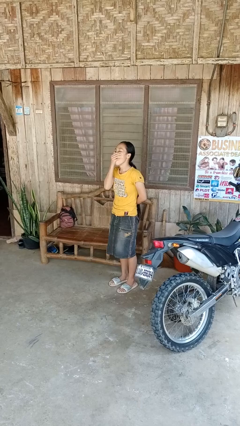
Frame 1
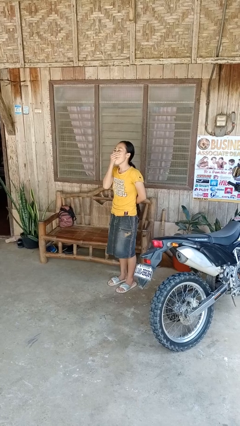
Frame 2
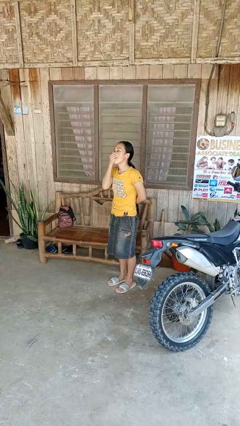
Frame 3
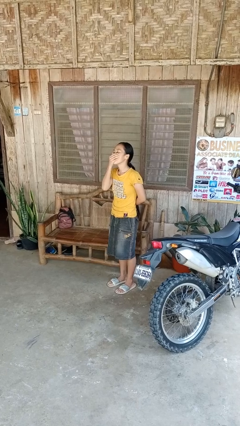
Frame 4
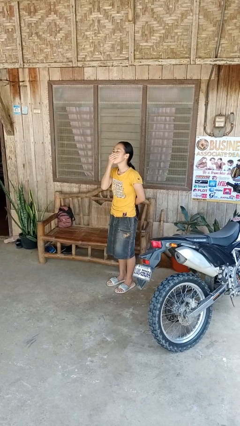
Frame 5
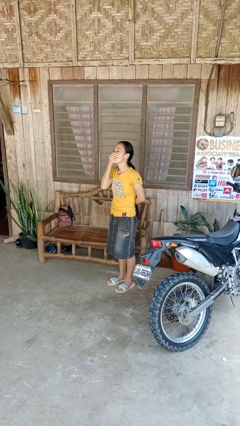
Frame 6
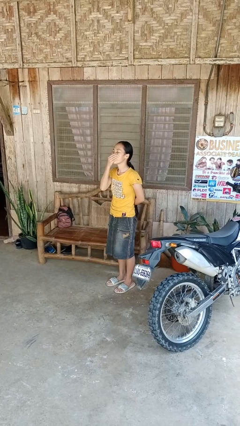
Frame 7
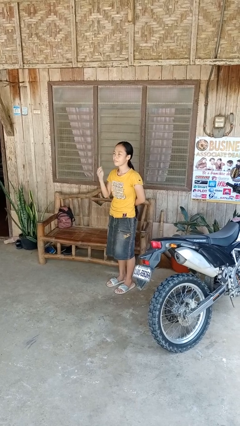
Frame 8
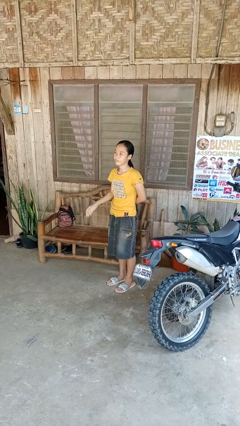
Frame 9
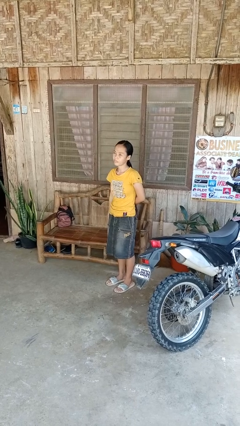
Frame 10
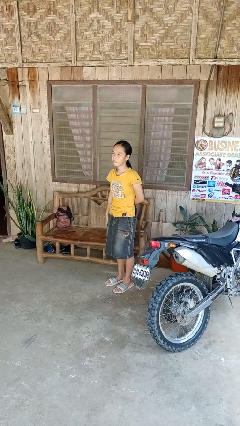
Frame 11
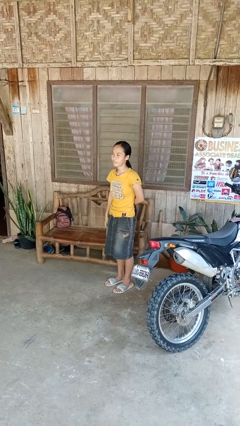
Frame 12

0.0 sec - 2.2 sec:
person yawns

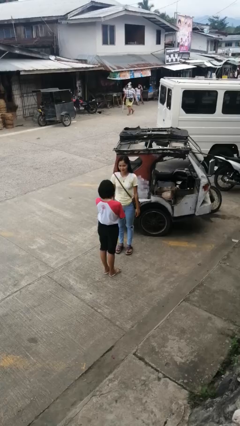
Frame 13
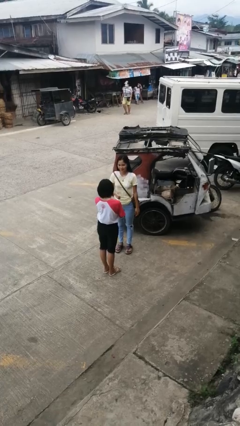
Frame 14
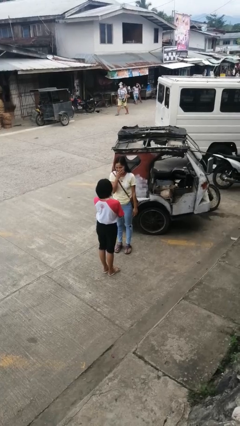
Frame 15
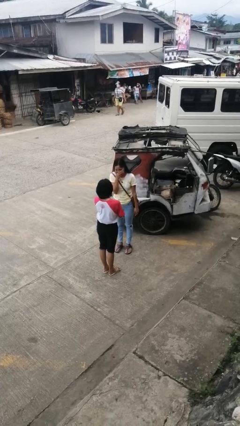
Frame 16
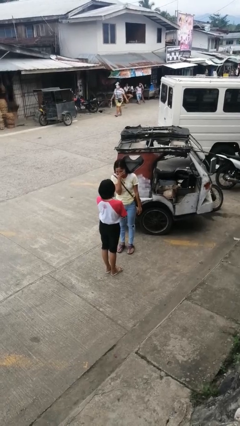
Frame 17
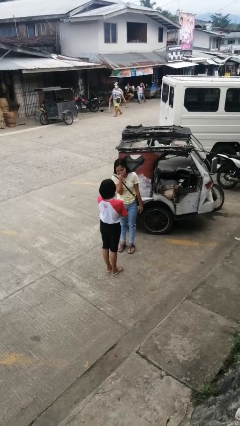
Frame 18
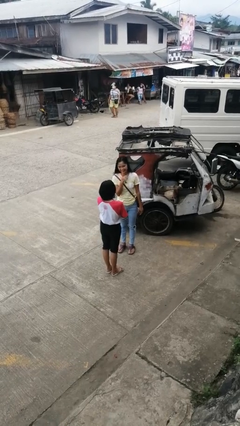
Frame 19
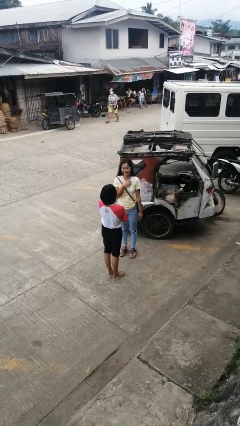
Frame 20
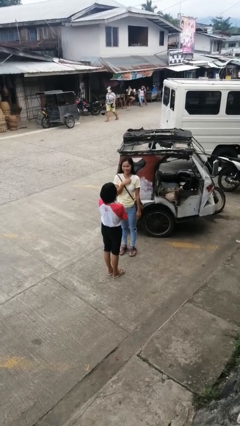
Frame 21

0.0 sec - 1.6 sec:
person laughs with person

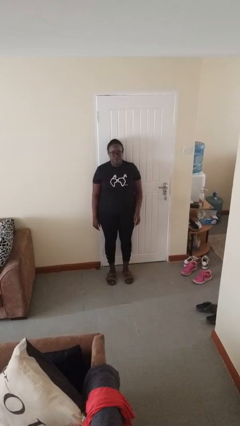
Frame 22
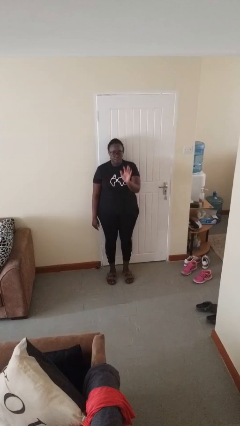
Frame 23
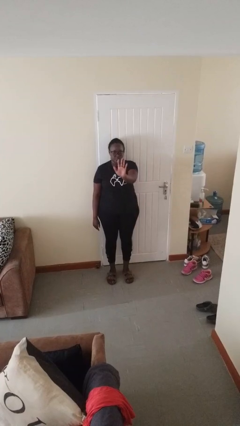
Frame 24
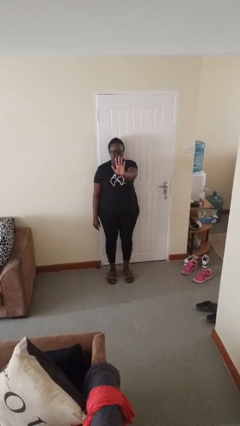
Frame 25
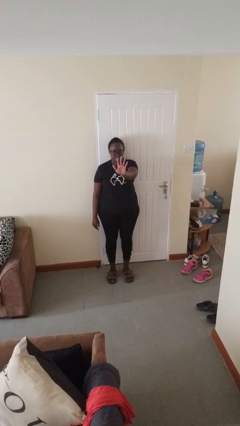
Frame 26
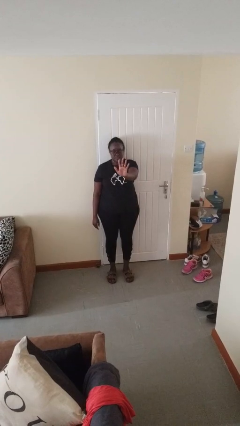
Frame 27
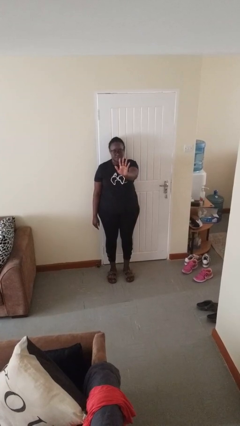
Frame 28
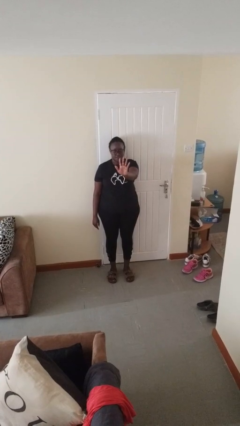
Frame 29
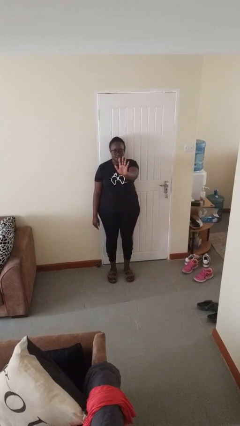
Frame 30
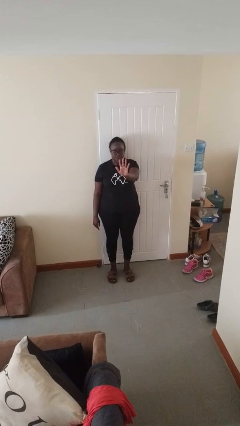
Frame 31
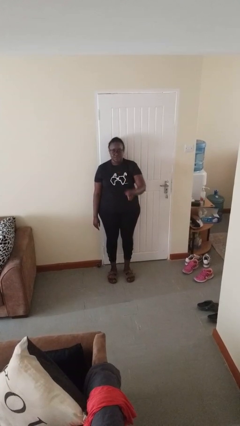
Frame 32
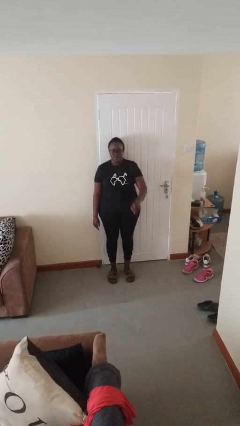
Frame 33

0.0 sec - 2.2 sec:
person gestures number five

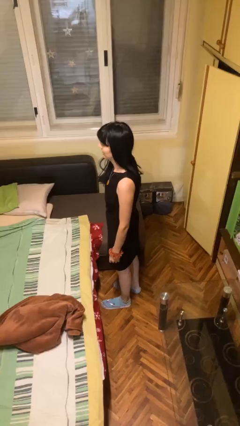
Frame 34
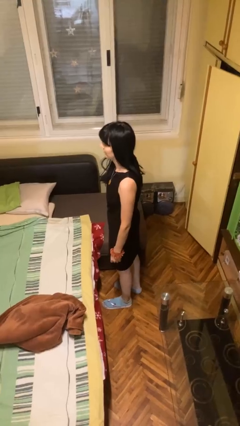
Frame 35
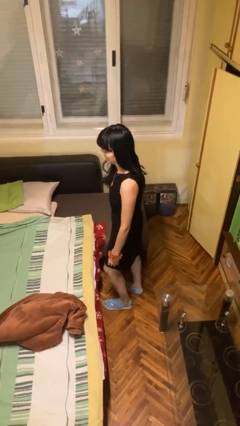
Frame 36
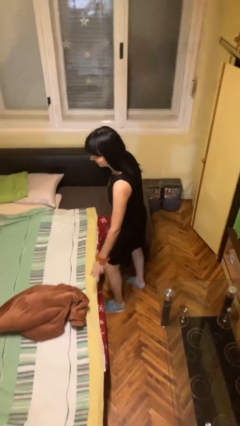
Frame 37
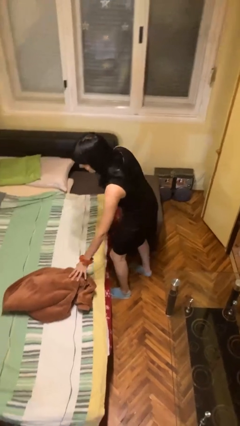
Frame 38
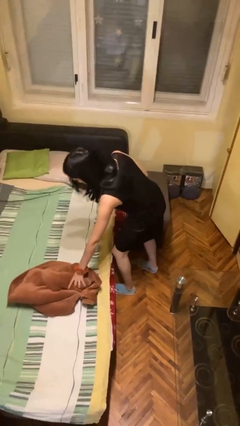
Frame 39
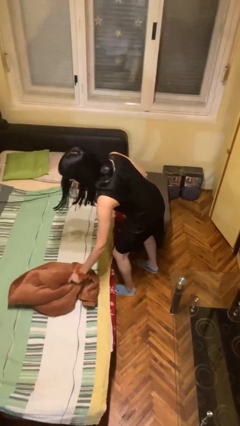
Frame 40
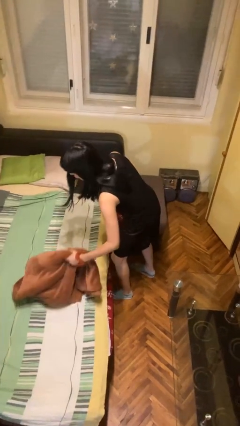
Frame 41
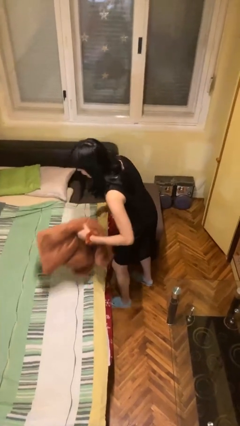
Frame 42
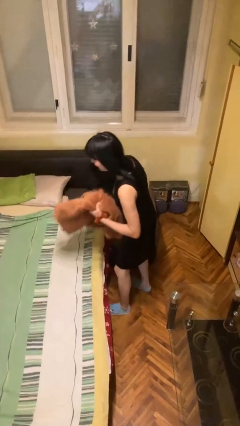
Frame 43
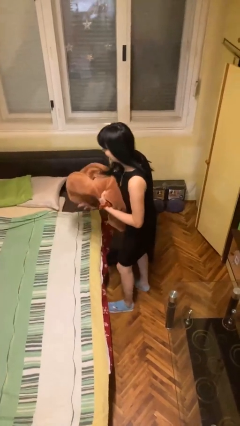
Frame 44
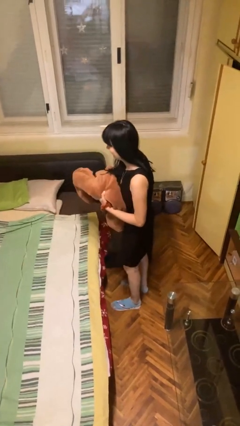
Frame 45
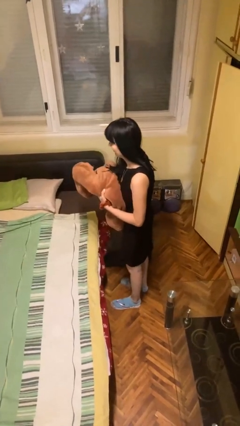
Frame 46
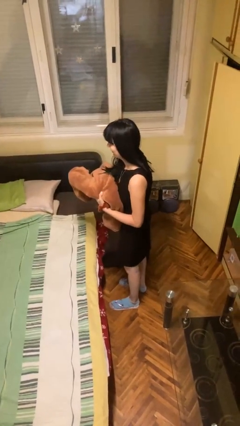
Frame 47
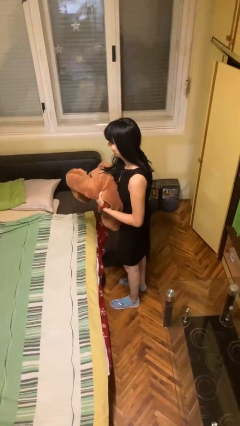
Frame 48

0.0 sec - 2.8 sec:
person picks up object from bed

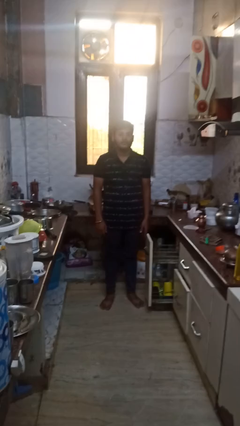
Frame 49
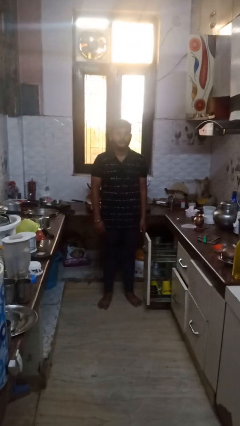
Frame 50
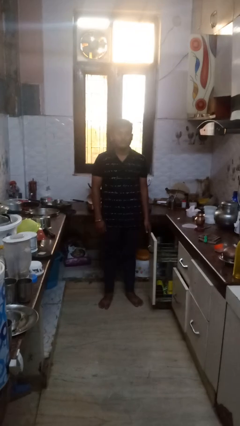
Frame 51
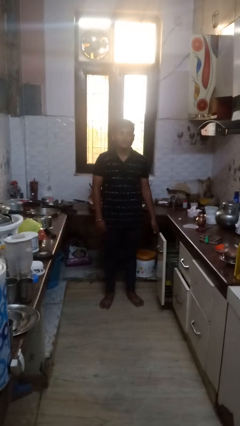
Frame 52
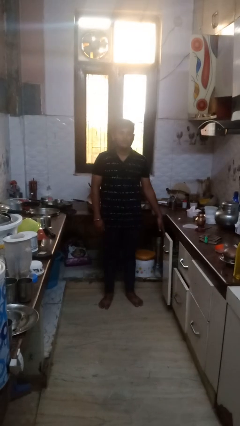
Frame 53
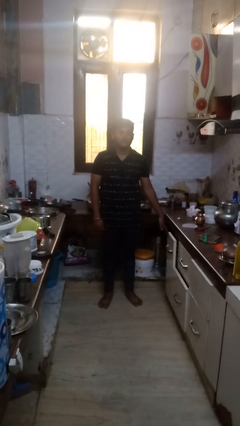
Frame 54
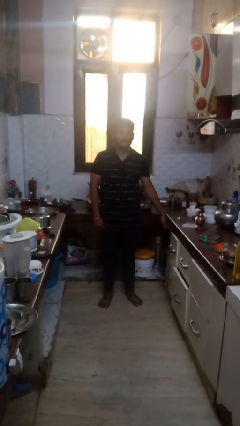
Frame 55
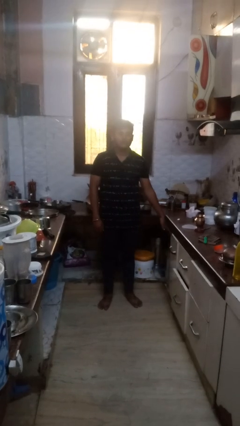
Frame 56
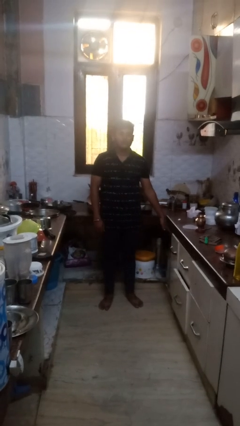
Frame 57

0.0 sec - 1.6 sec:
person closes dishwasher

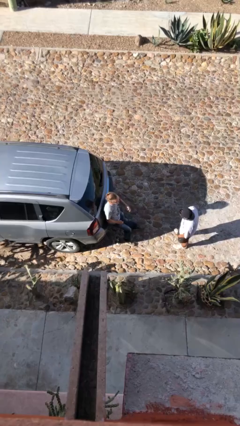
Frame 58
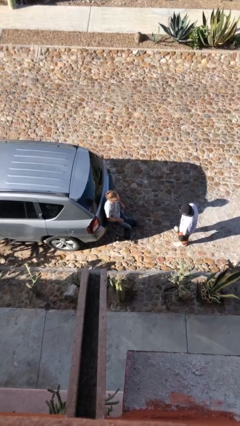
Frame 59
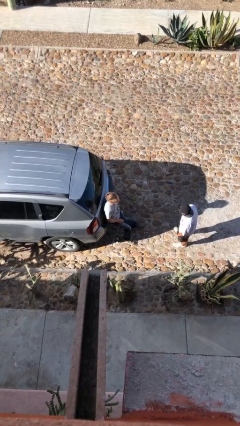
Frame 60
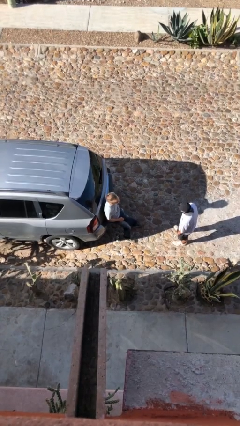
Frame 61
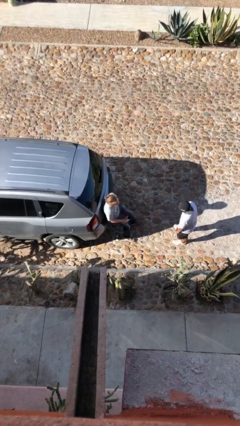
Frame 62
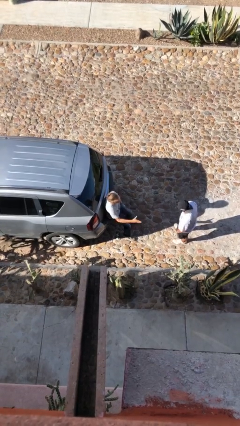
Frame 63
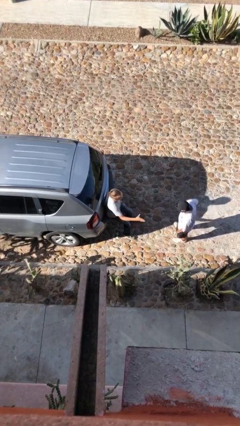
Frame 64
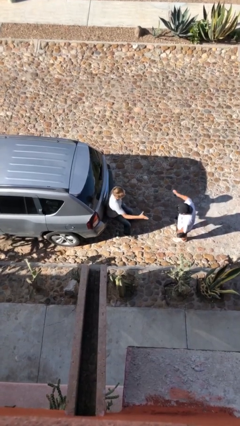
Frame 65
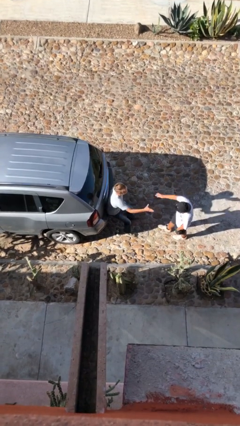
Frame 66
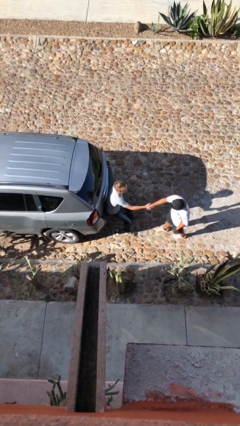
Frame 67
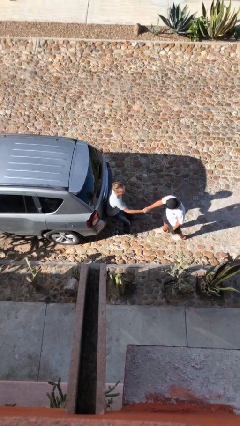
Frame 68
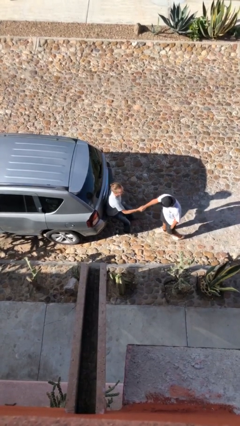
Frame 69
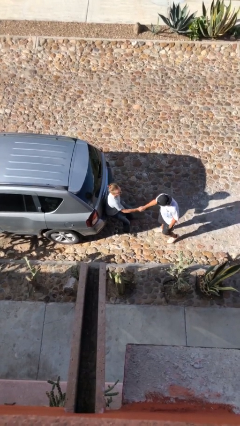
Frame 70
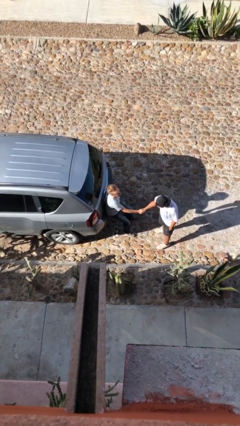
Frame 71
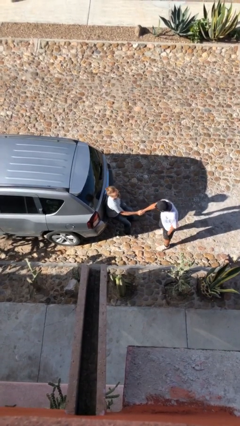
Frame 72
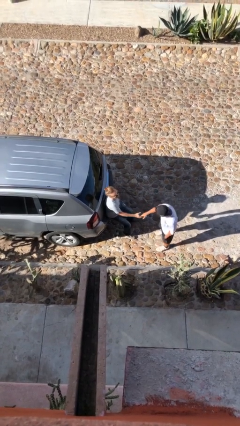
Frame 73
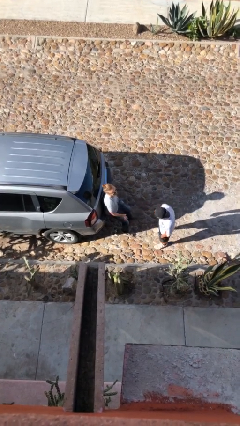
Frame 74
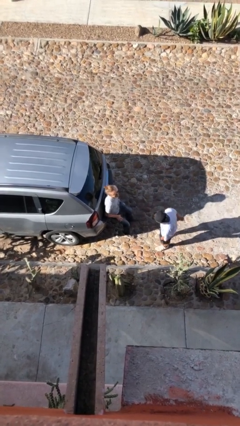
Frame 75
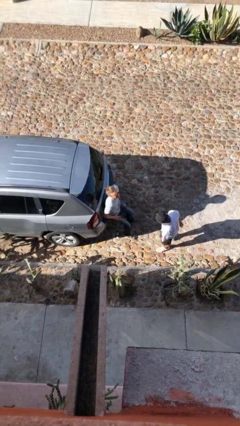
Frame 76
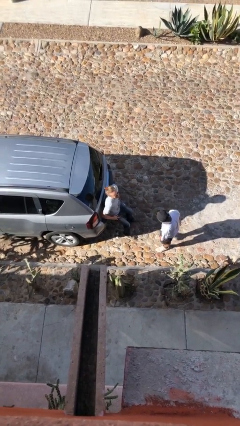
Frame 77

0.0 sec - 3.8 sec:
person shakes hand

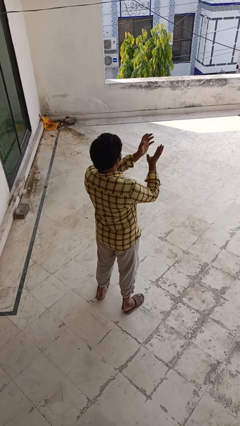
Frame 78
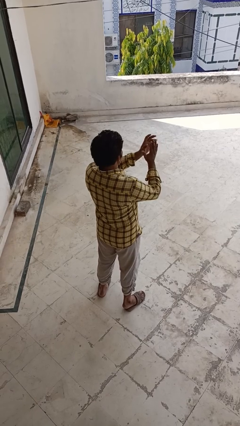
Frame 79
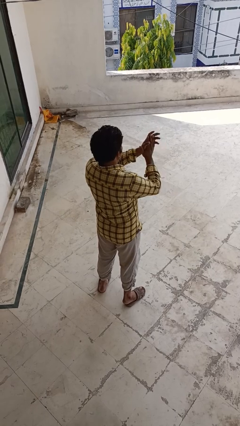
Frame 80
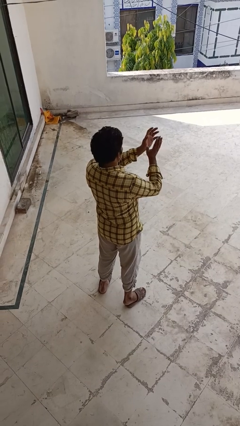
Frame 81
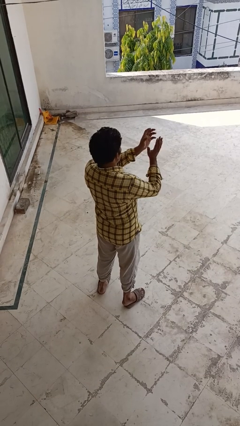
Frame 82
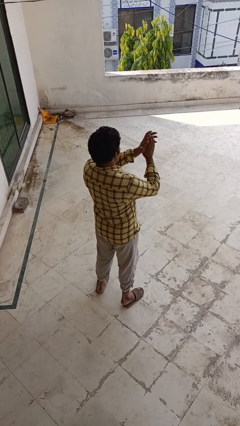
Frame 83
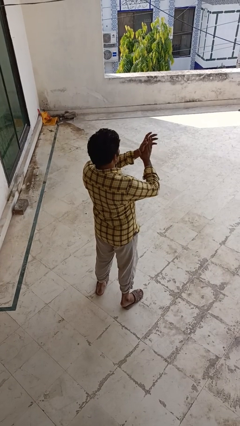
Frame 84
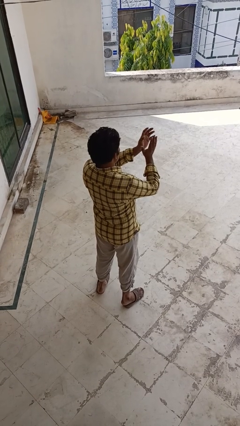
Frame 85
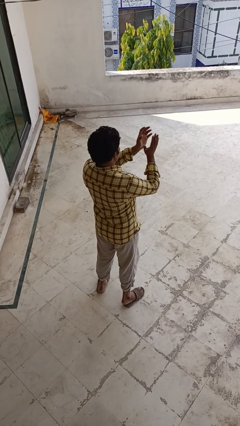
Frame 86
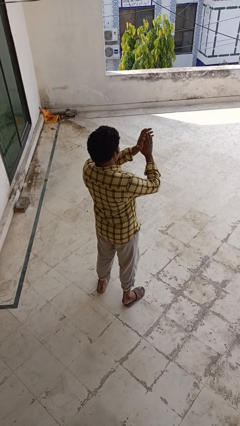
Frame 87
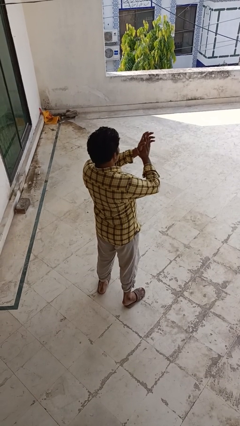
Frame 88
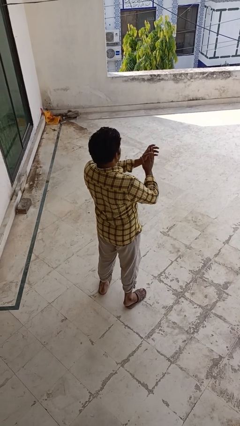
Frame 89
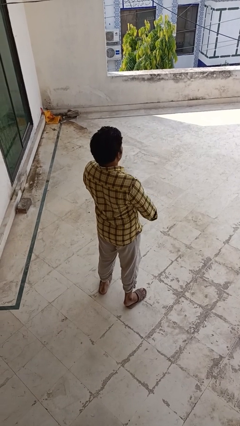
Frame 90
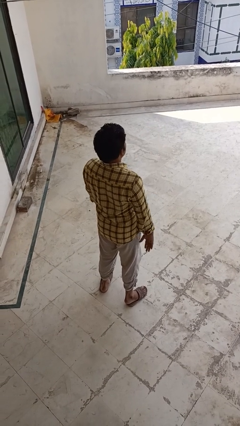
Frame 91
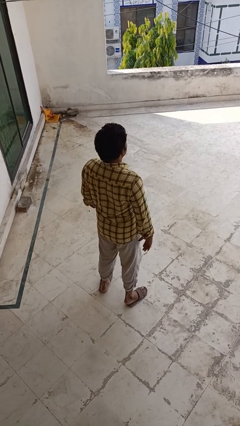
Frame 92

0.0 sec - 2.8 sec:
person claps hands
